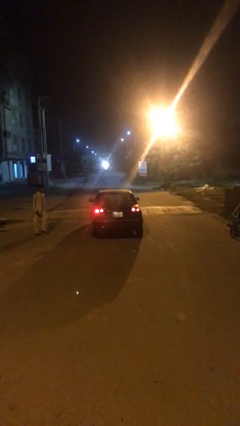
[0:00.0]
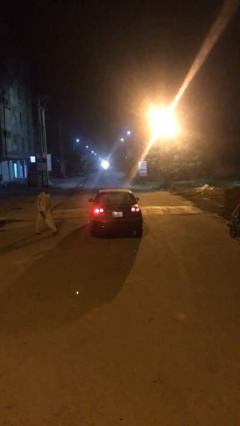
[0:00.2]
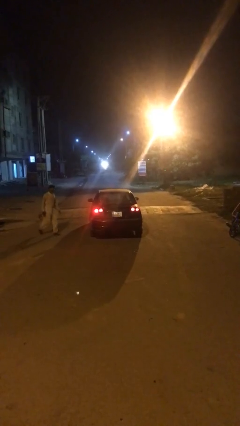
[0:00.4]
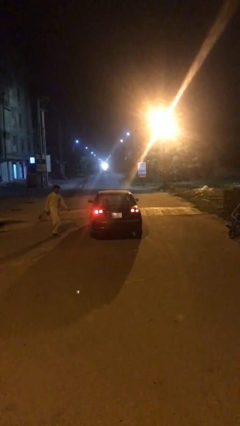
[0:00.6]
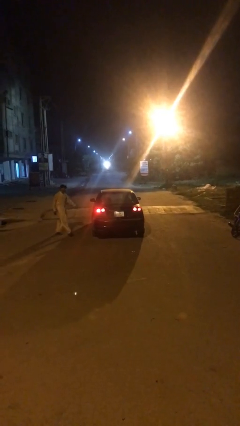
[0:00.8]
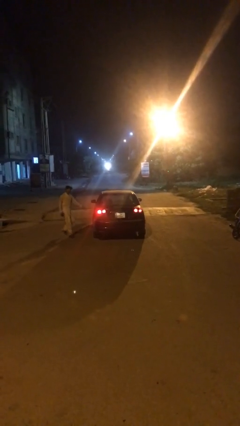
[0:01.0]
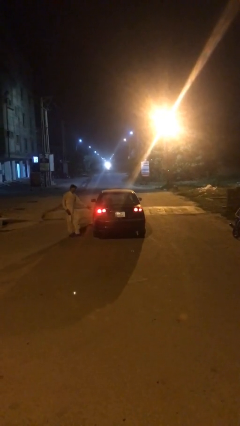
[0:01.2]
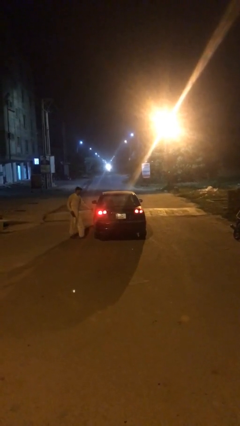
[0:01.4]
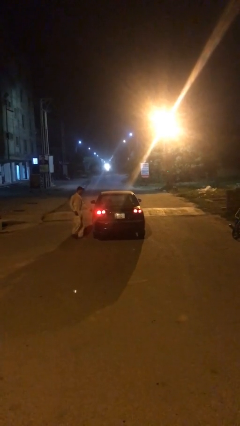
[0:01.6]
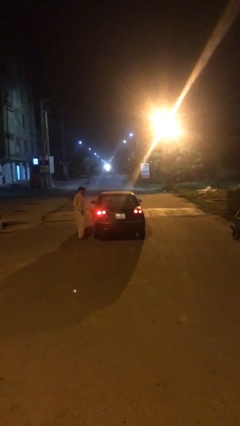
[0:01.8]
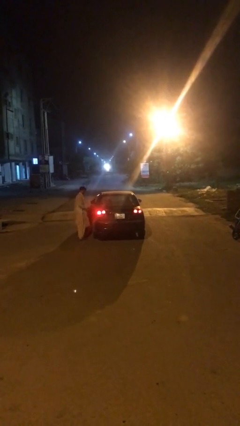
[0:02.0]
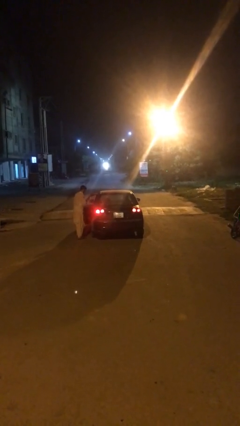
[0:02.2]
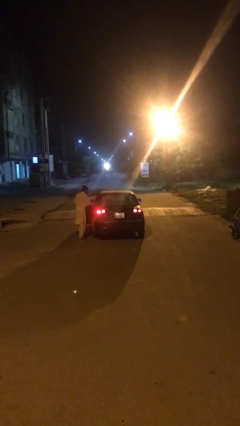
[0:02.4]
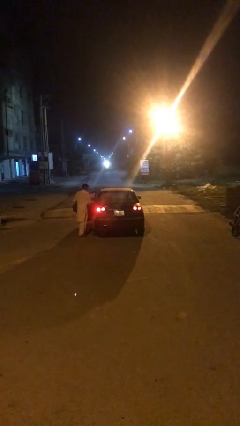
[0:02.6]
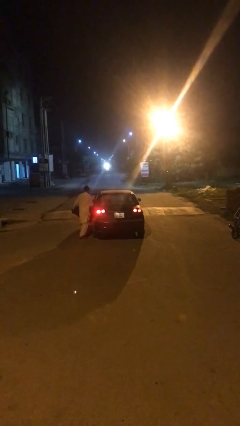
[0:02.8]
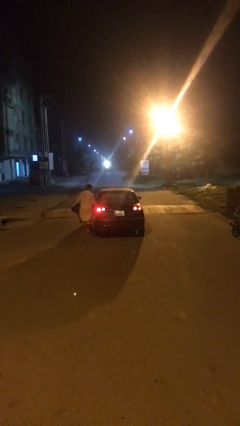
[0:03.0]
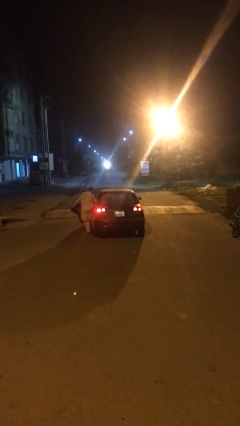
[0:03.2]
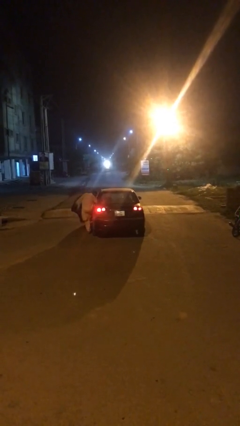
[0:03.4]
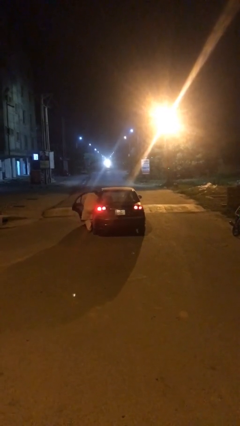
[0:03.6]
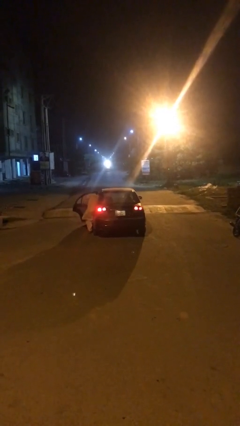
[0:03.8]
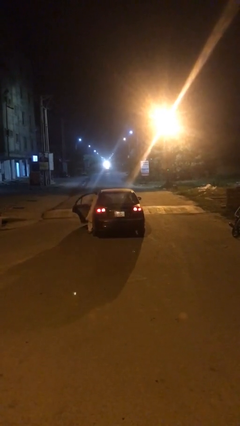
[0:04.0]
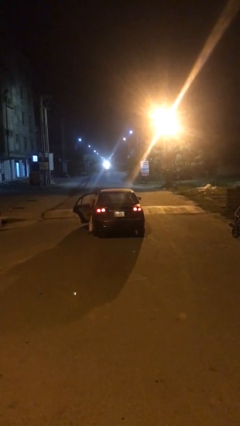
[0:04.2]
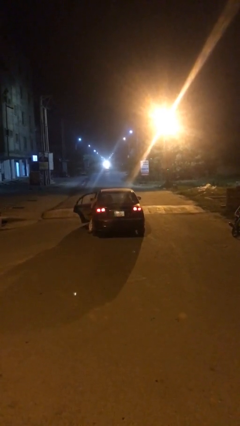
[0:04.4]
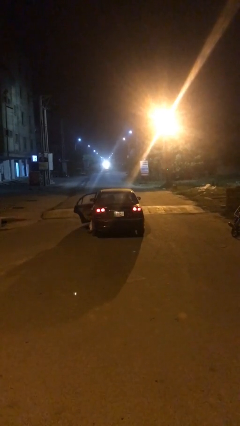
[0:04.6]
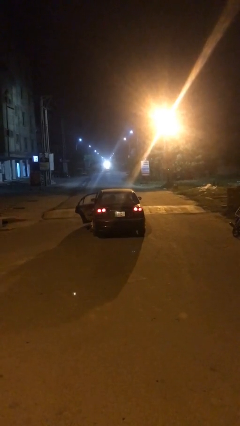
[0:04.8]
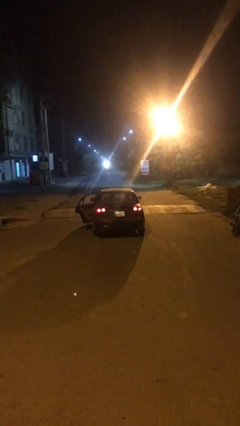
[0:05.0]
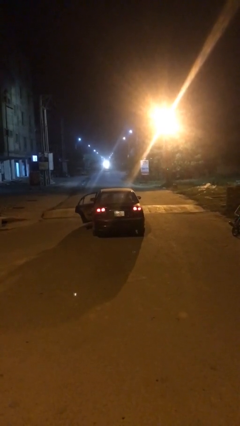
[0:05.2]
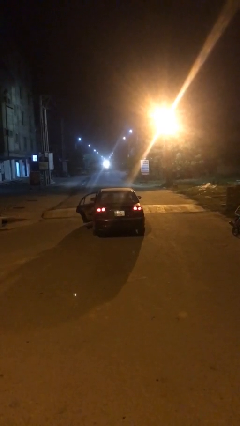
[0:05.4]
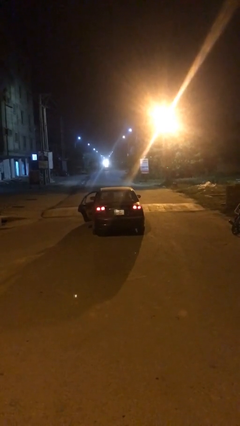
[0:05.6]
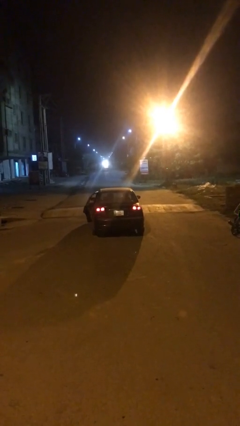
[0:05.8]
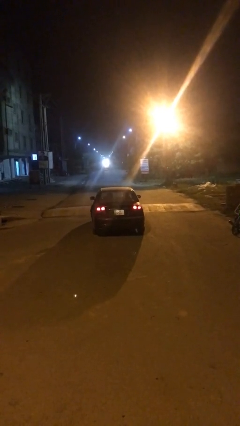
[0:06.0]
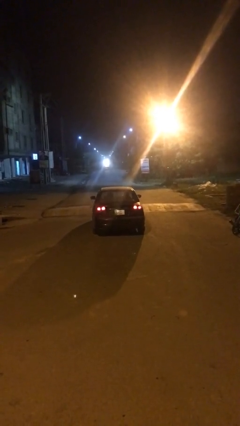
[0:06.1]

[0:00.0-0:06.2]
car picks up person

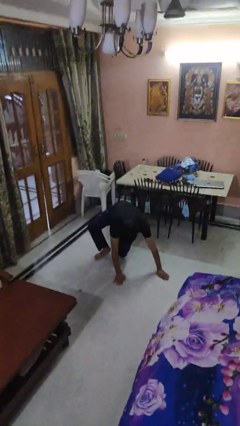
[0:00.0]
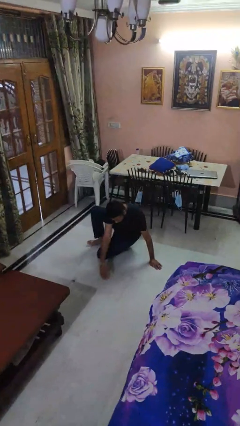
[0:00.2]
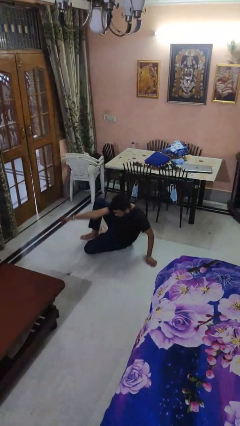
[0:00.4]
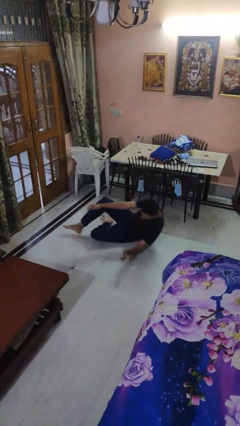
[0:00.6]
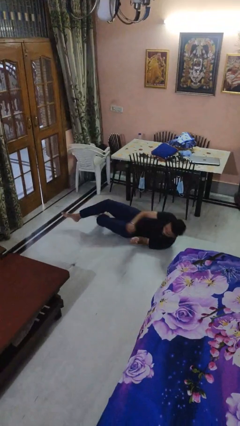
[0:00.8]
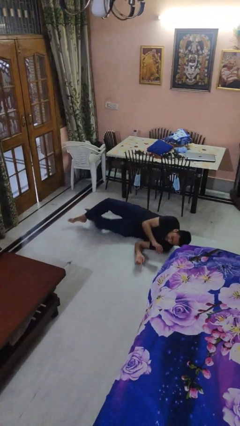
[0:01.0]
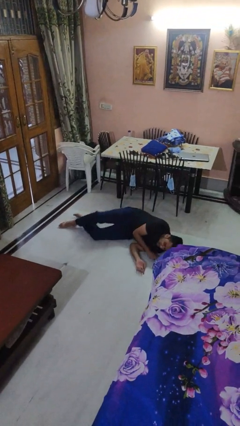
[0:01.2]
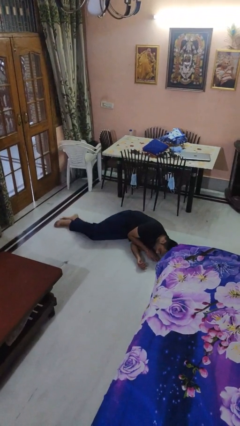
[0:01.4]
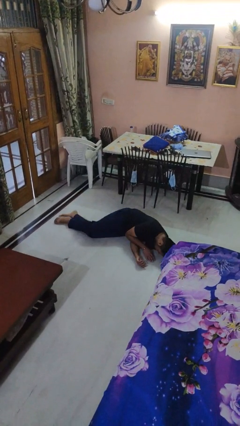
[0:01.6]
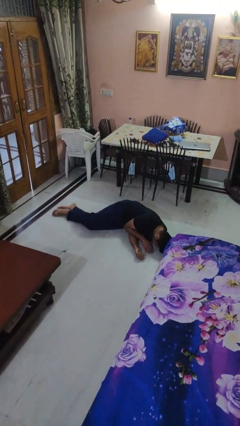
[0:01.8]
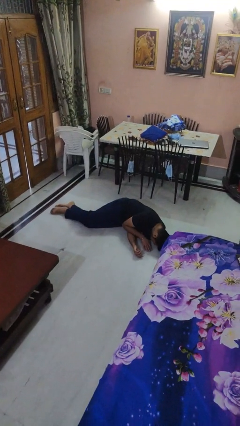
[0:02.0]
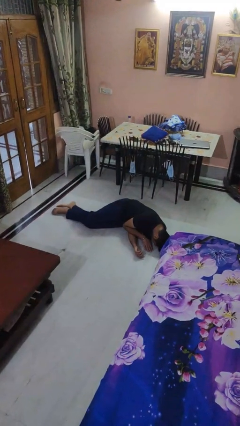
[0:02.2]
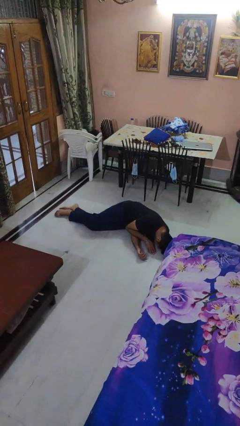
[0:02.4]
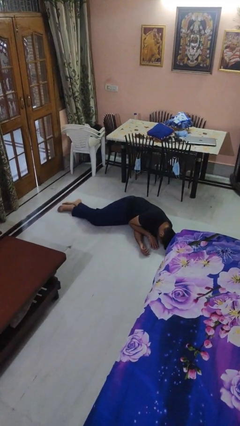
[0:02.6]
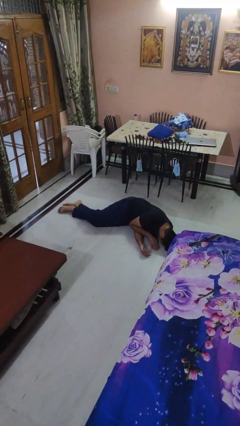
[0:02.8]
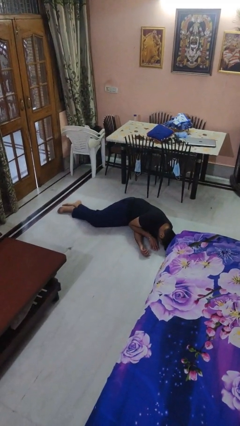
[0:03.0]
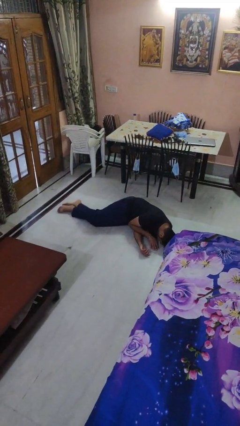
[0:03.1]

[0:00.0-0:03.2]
person lies down on floor

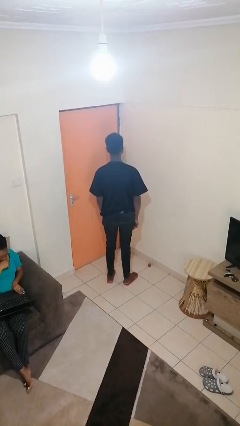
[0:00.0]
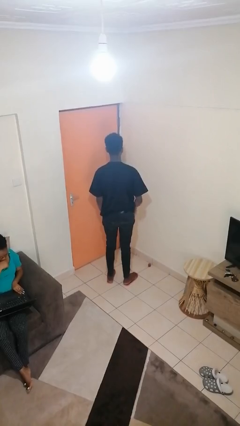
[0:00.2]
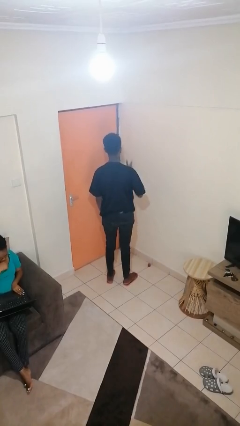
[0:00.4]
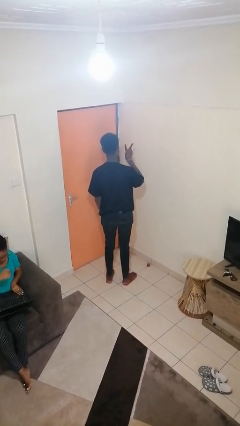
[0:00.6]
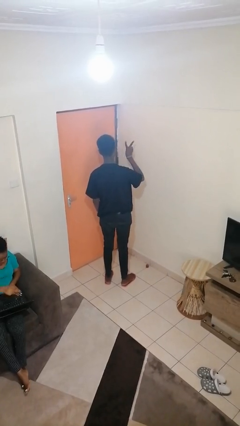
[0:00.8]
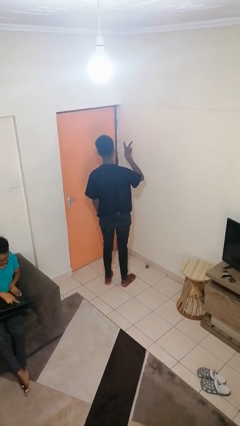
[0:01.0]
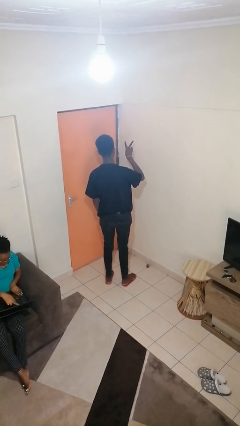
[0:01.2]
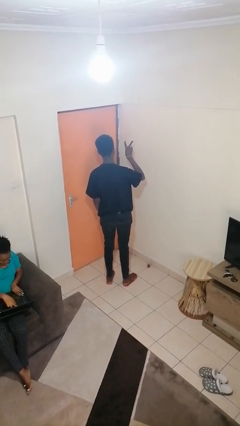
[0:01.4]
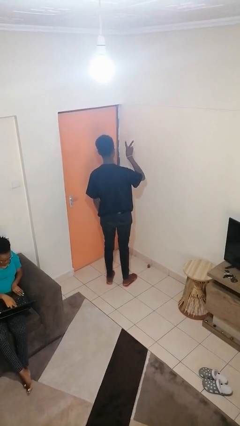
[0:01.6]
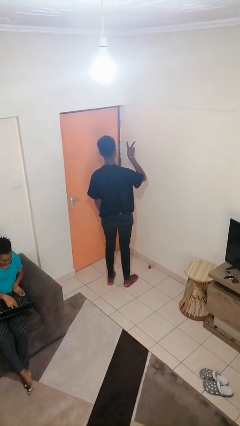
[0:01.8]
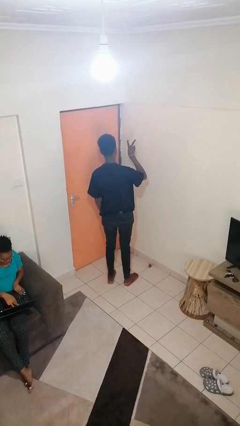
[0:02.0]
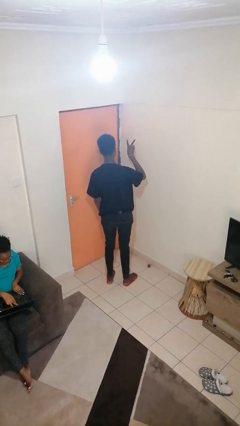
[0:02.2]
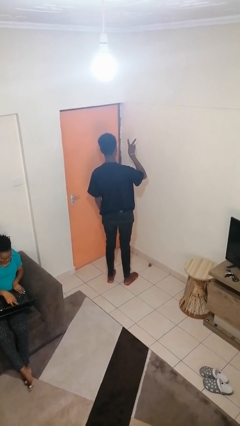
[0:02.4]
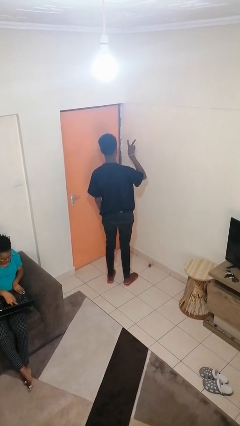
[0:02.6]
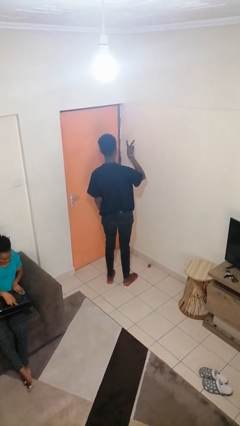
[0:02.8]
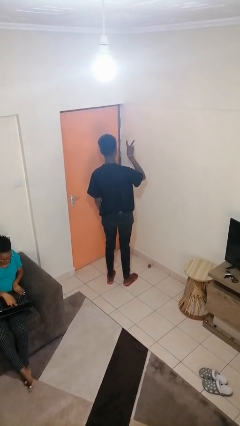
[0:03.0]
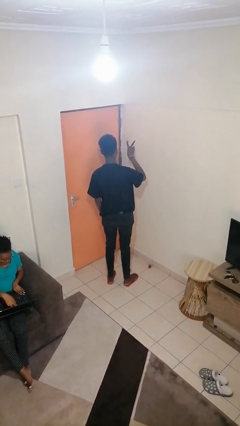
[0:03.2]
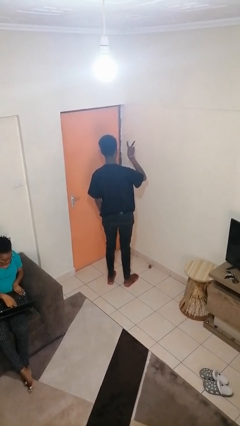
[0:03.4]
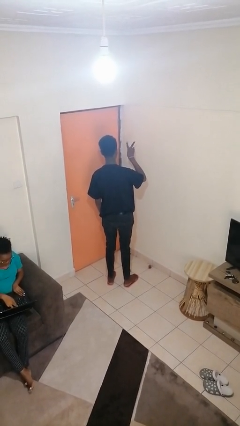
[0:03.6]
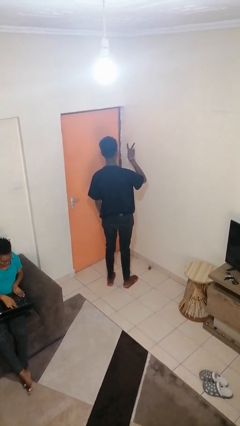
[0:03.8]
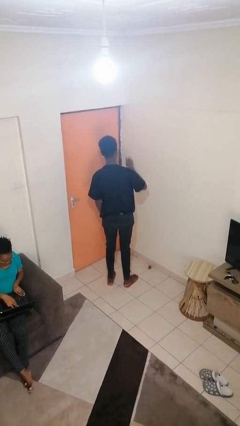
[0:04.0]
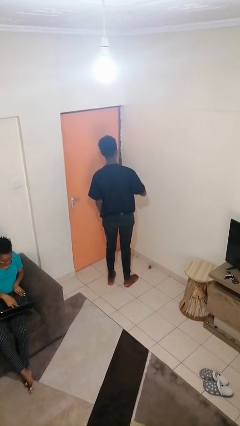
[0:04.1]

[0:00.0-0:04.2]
person gestures peace

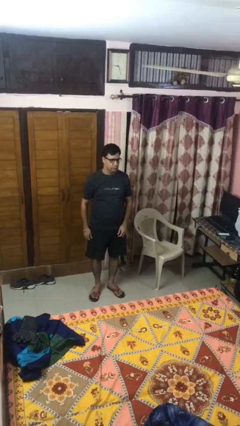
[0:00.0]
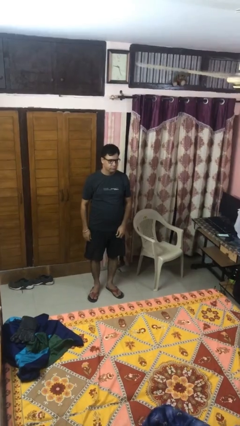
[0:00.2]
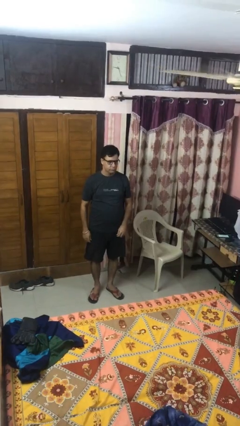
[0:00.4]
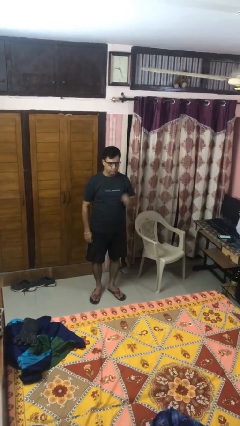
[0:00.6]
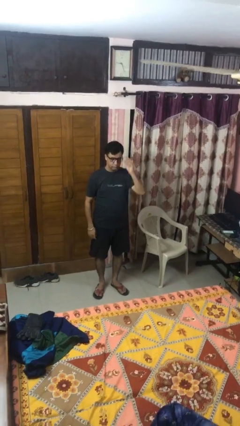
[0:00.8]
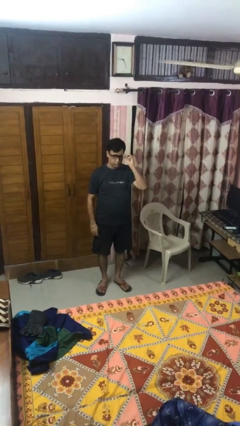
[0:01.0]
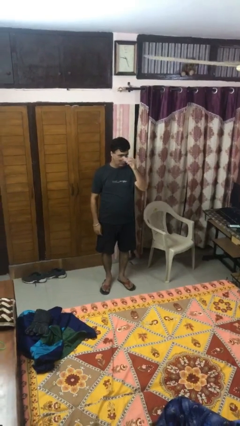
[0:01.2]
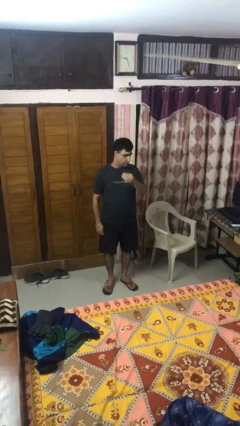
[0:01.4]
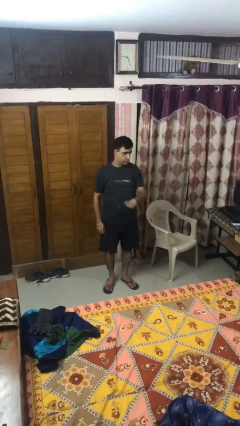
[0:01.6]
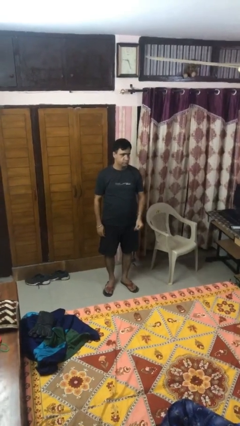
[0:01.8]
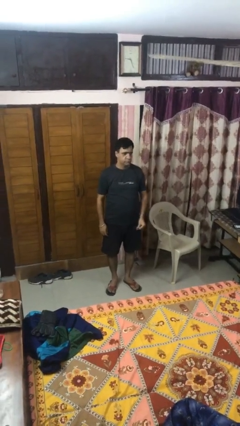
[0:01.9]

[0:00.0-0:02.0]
person takes off glasses

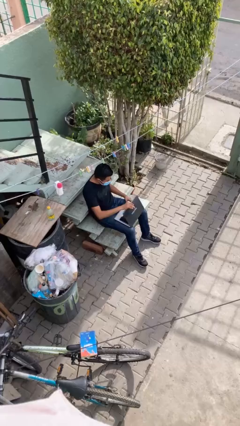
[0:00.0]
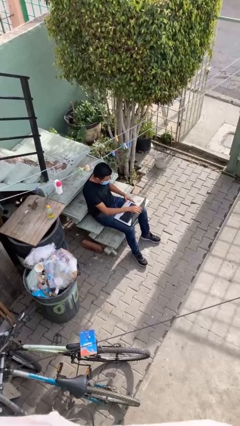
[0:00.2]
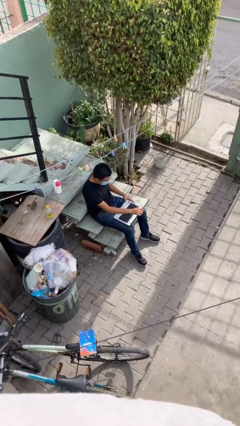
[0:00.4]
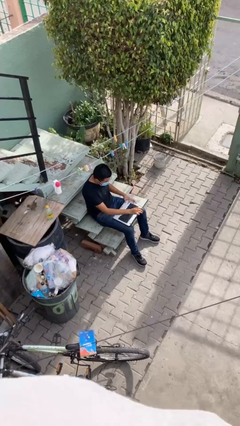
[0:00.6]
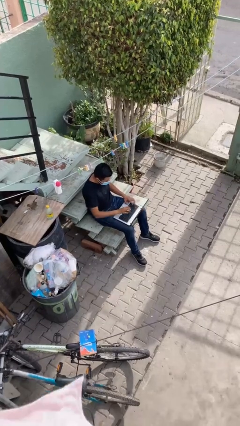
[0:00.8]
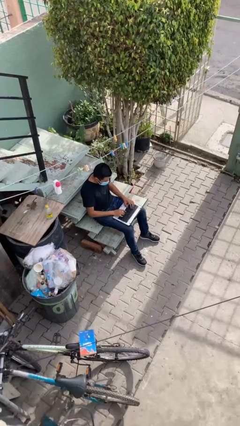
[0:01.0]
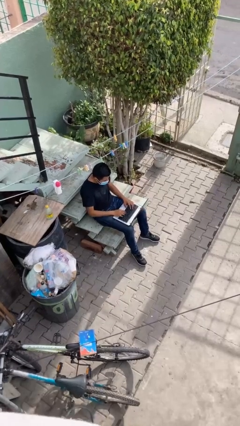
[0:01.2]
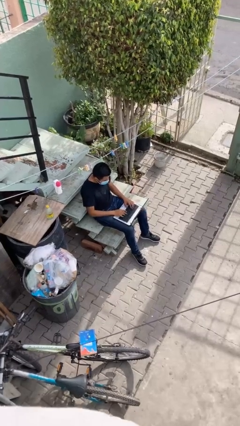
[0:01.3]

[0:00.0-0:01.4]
person interacts with laptop

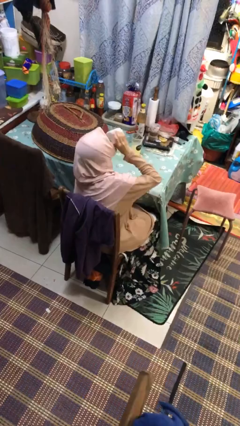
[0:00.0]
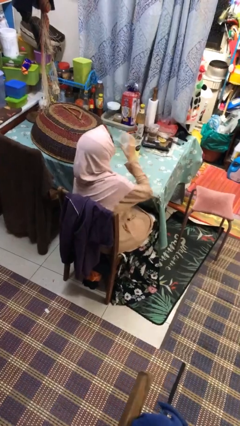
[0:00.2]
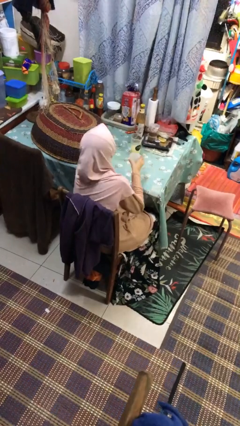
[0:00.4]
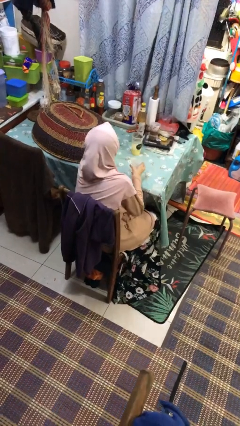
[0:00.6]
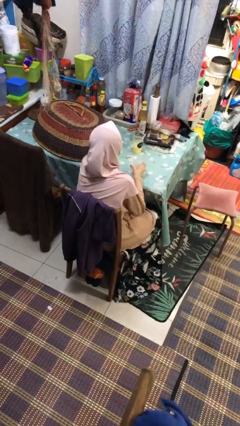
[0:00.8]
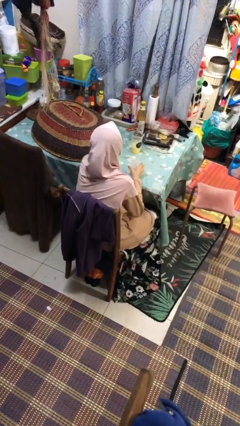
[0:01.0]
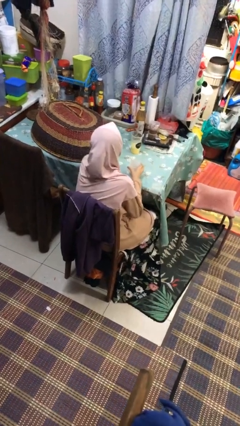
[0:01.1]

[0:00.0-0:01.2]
person puts down object on table
